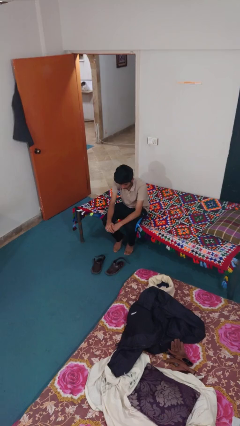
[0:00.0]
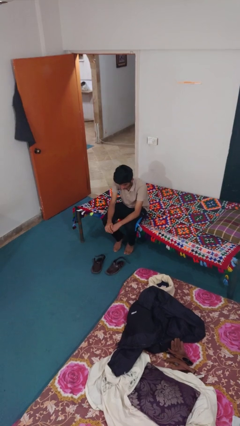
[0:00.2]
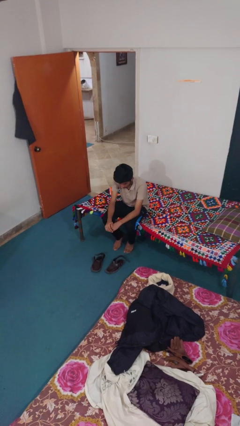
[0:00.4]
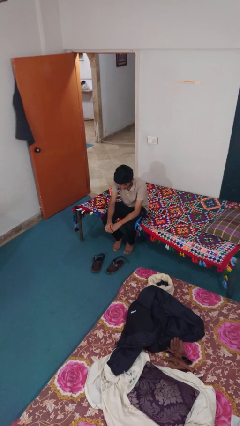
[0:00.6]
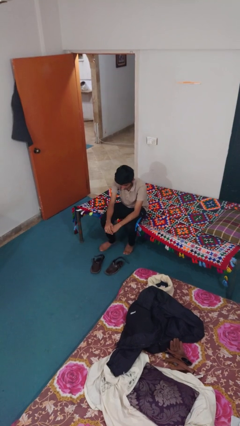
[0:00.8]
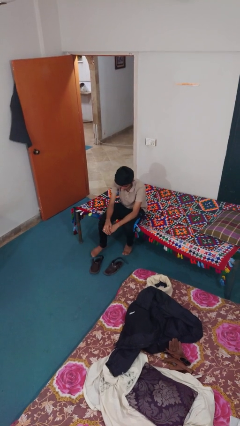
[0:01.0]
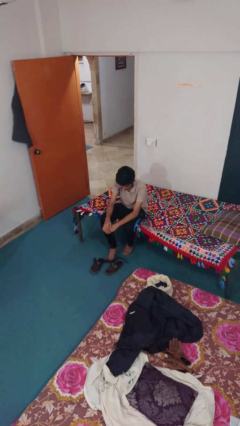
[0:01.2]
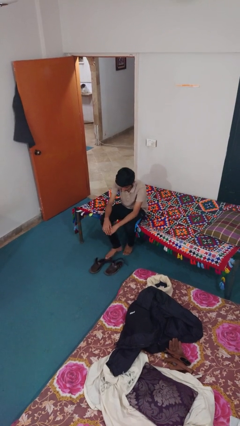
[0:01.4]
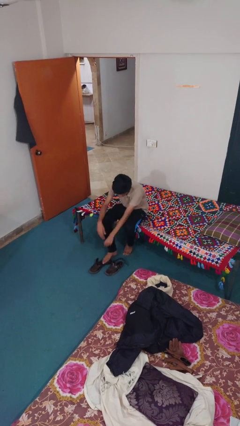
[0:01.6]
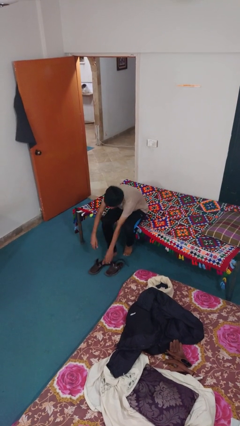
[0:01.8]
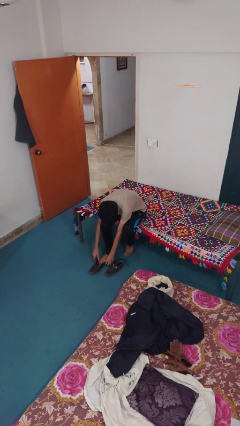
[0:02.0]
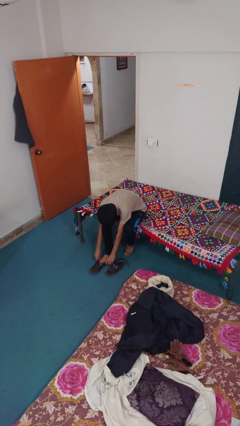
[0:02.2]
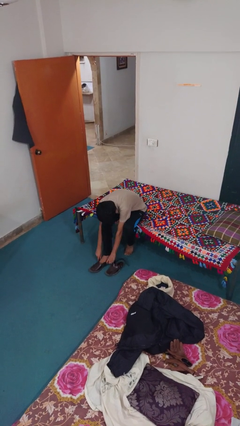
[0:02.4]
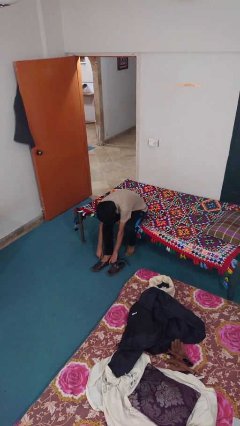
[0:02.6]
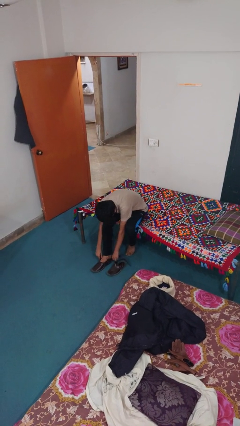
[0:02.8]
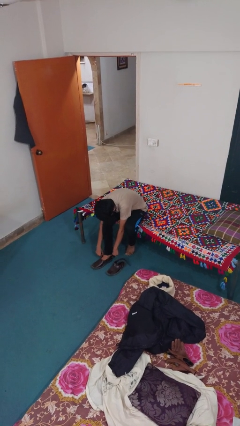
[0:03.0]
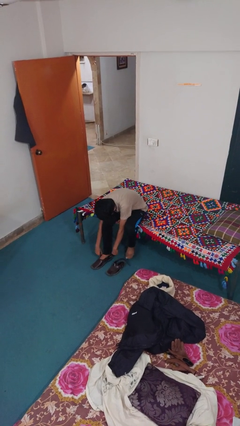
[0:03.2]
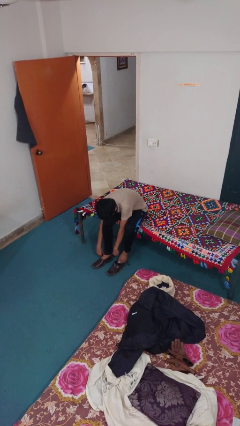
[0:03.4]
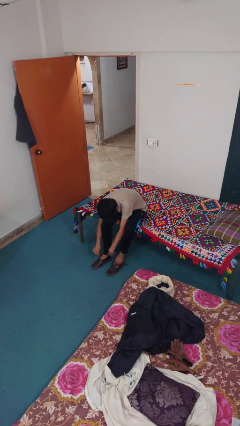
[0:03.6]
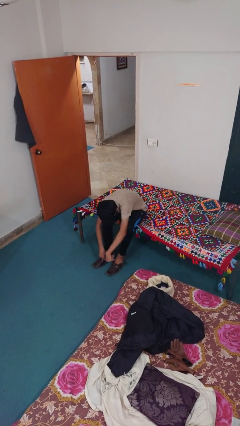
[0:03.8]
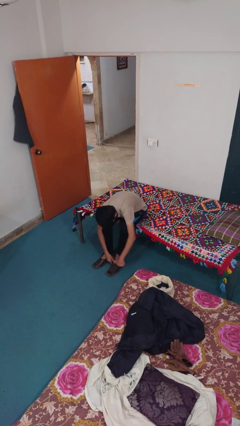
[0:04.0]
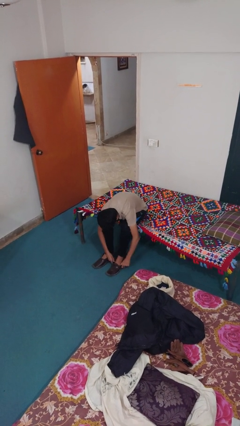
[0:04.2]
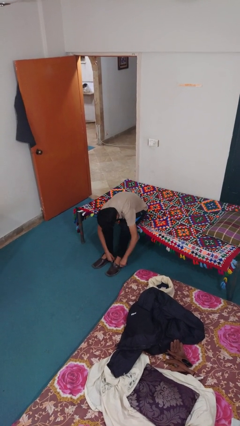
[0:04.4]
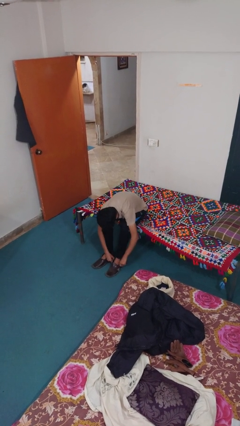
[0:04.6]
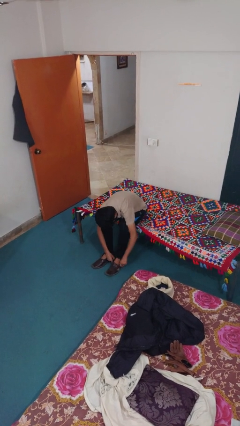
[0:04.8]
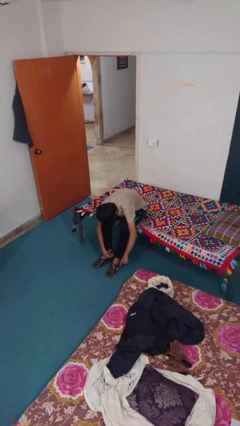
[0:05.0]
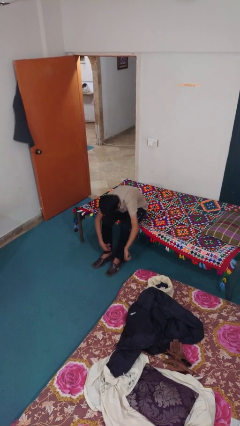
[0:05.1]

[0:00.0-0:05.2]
person puts on shoes

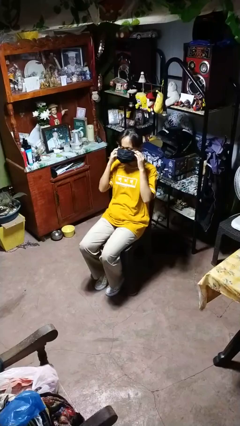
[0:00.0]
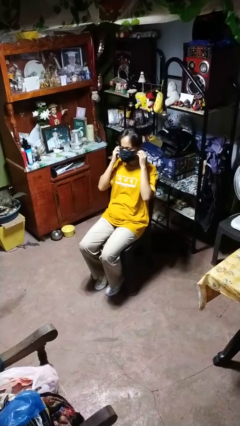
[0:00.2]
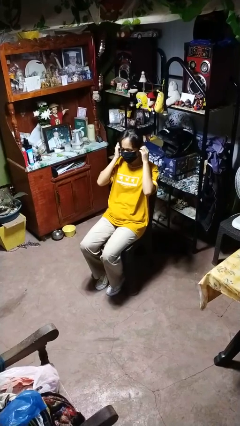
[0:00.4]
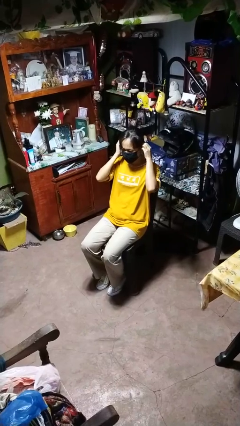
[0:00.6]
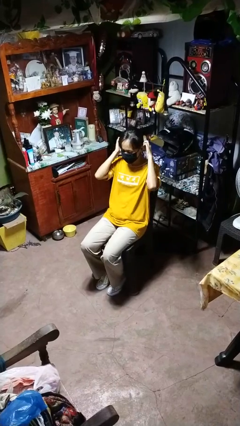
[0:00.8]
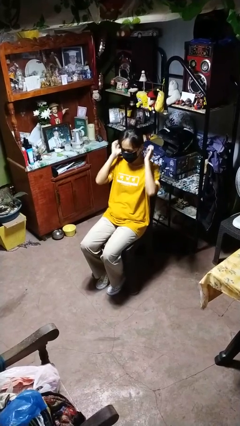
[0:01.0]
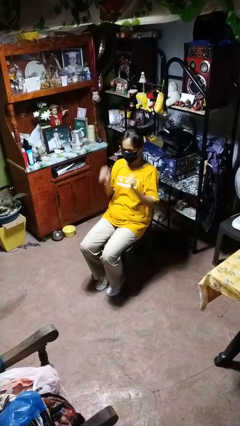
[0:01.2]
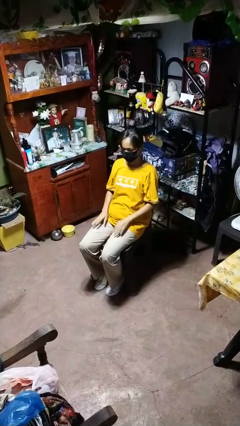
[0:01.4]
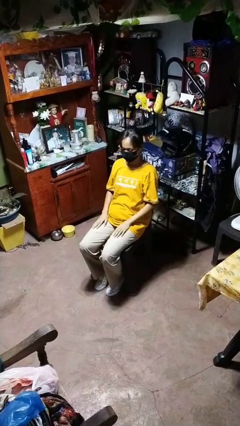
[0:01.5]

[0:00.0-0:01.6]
person puts on facemask

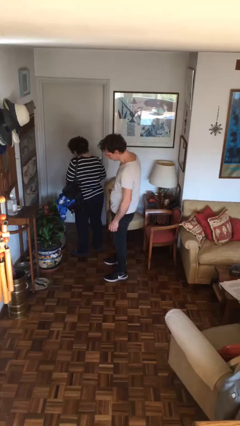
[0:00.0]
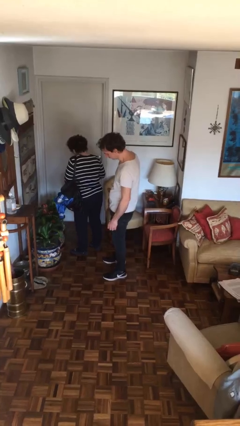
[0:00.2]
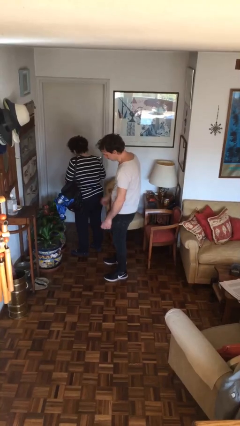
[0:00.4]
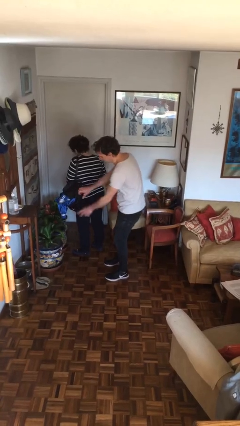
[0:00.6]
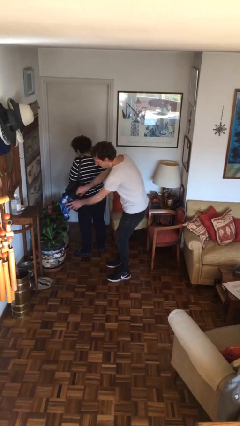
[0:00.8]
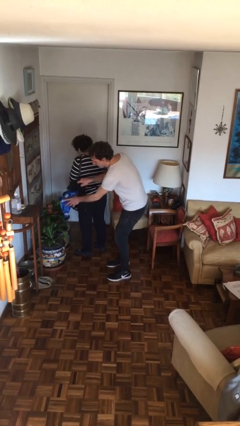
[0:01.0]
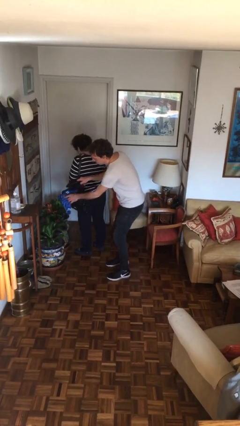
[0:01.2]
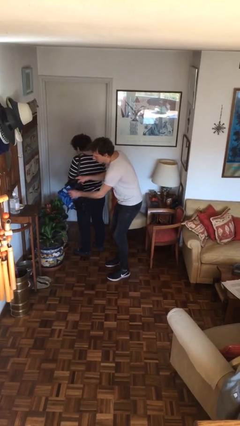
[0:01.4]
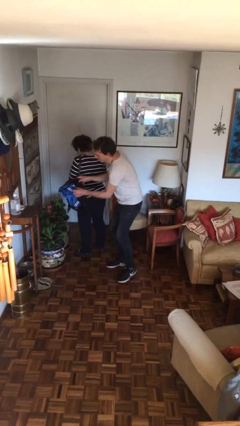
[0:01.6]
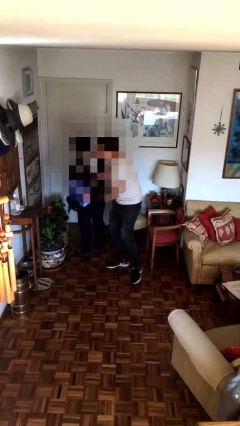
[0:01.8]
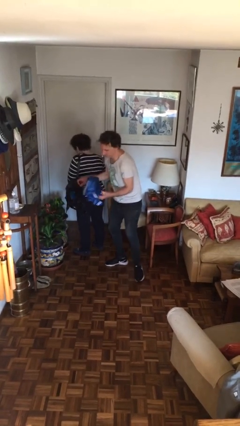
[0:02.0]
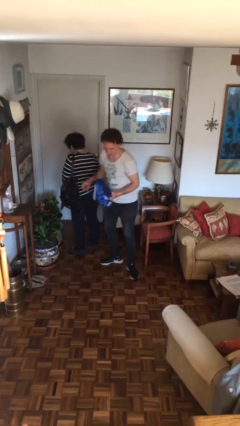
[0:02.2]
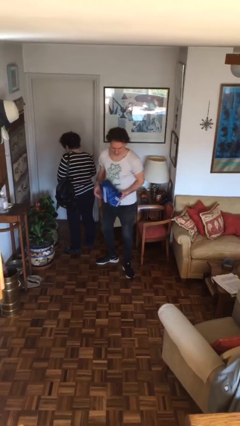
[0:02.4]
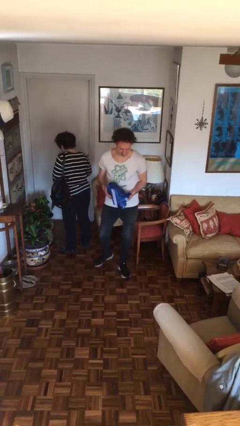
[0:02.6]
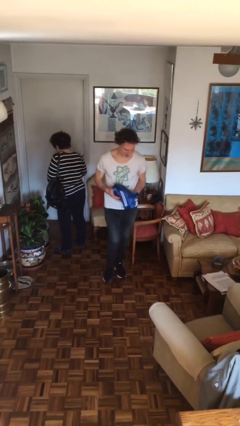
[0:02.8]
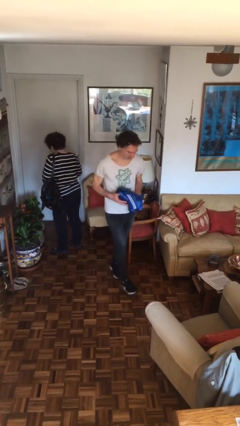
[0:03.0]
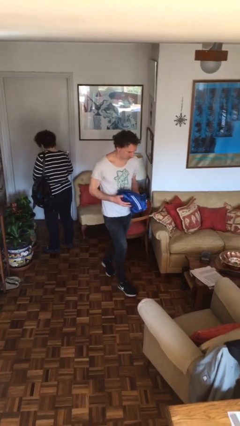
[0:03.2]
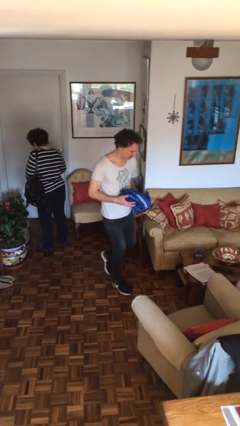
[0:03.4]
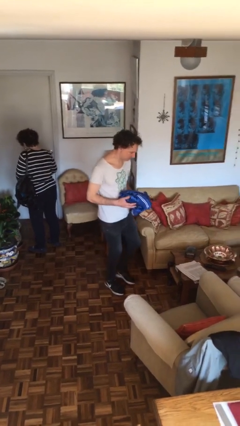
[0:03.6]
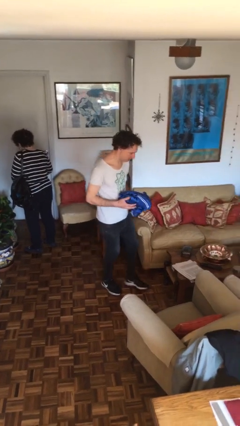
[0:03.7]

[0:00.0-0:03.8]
person steals object from person

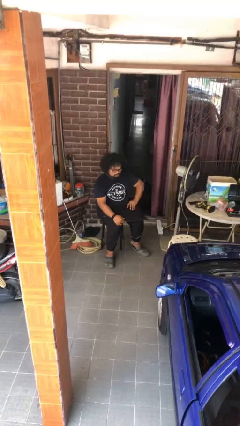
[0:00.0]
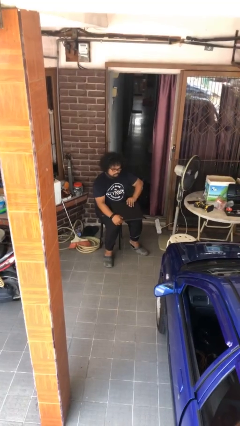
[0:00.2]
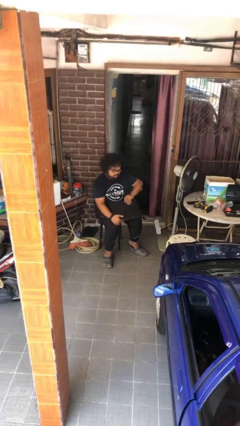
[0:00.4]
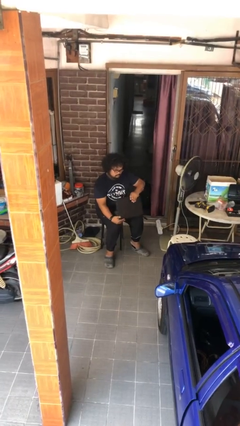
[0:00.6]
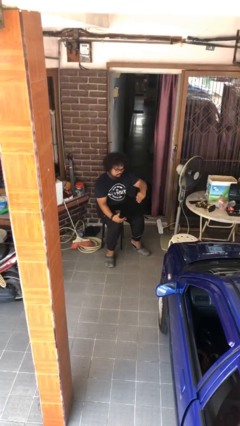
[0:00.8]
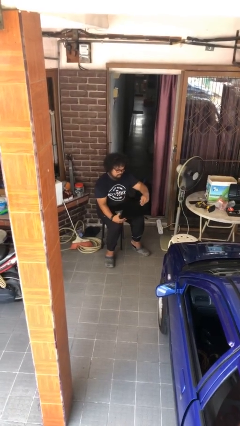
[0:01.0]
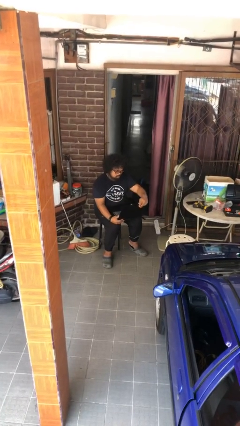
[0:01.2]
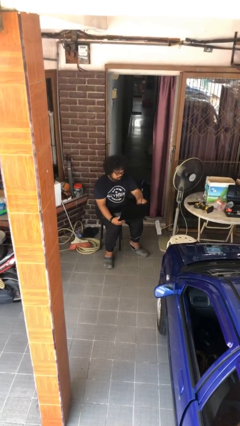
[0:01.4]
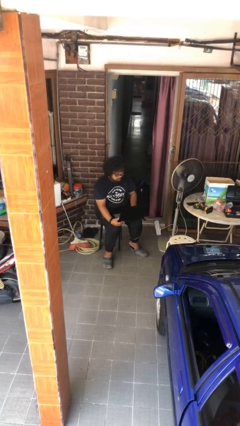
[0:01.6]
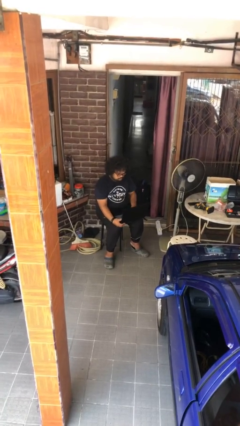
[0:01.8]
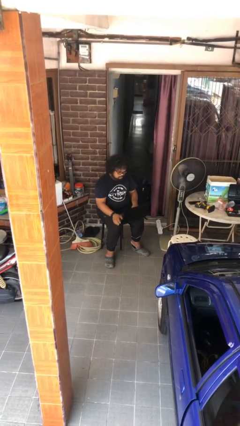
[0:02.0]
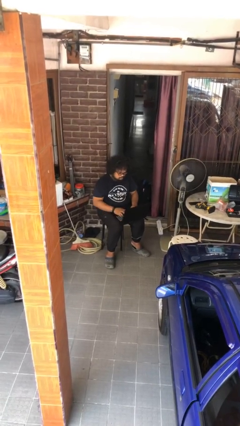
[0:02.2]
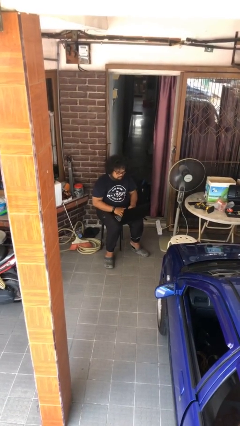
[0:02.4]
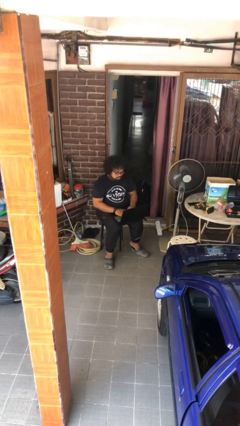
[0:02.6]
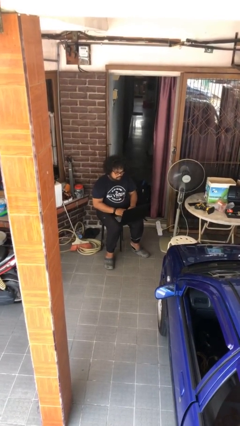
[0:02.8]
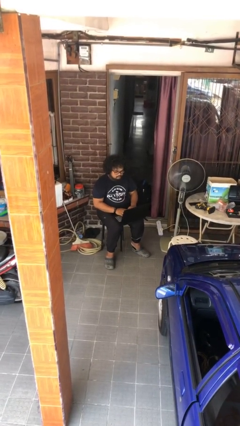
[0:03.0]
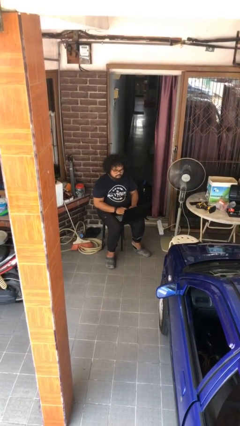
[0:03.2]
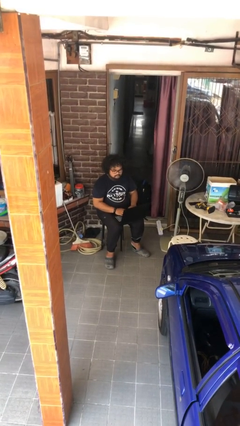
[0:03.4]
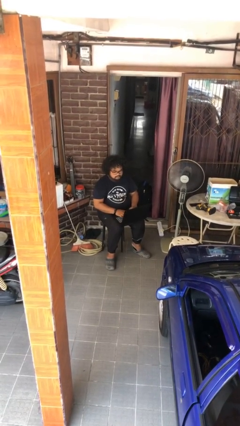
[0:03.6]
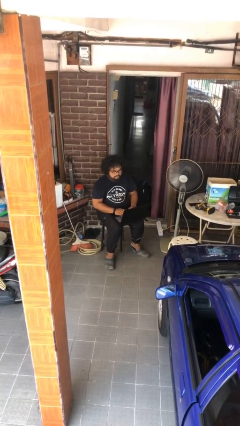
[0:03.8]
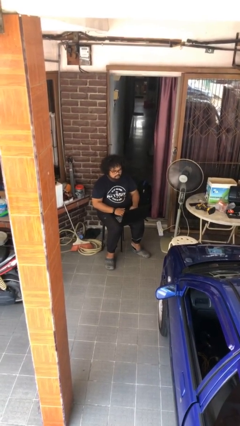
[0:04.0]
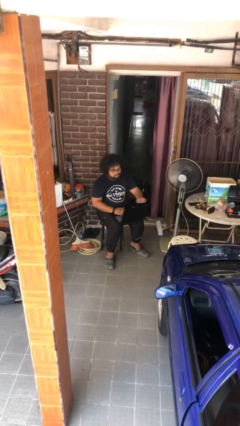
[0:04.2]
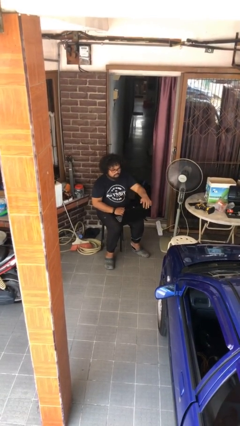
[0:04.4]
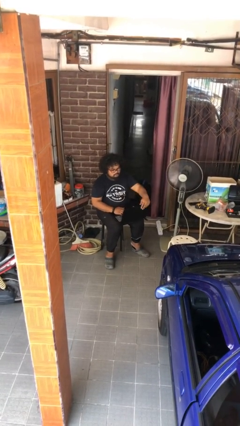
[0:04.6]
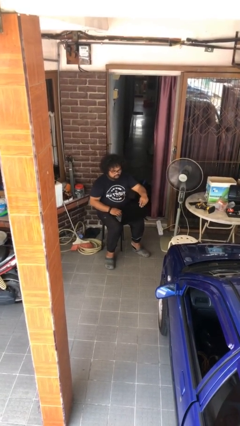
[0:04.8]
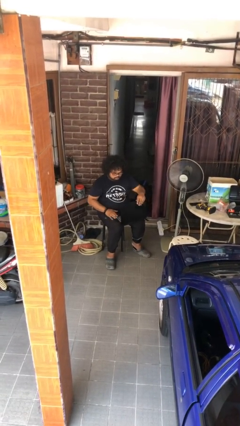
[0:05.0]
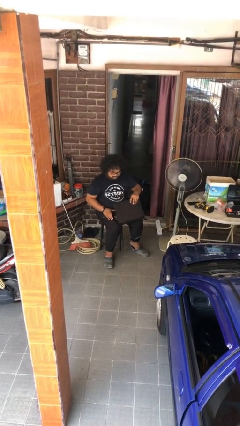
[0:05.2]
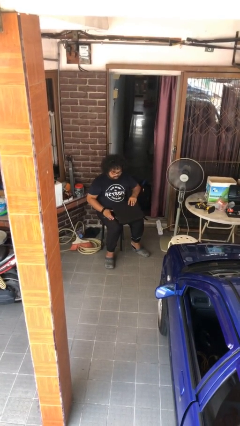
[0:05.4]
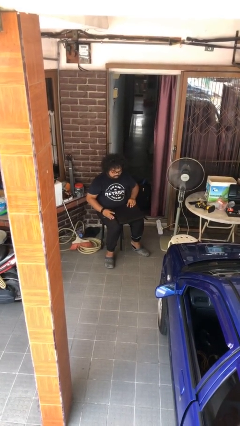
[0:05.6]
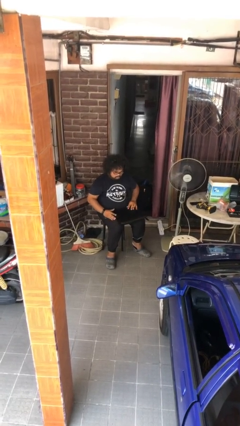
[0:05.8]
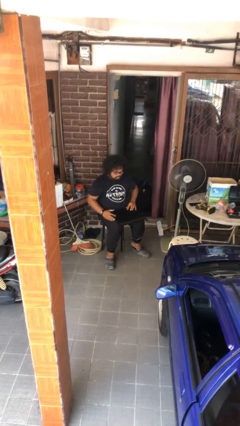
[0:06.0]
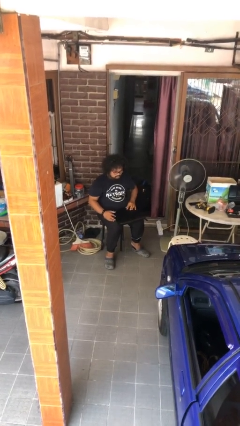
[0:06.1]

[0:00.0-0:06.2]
person interacts with laptop

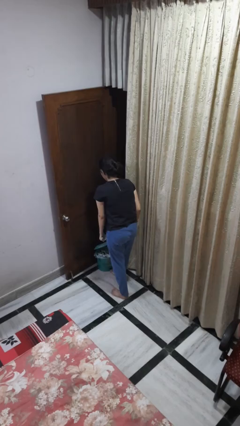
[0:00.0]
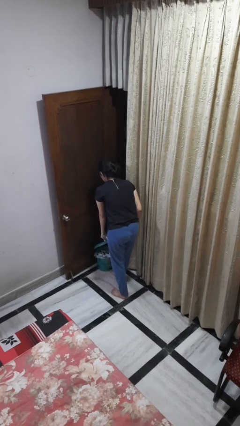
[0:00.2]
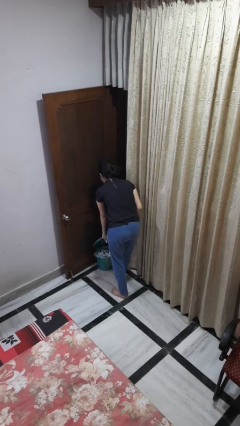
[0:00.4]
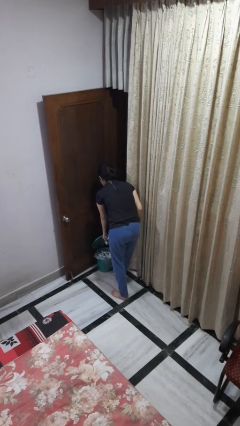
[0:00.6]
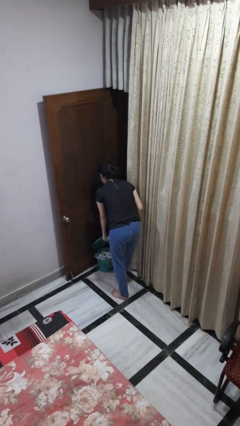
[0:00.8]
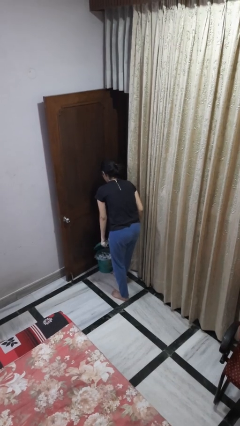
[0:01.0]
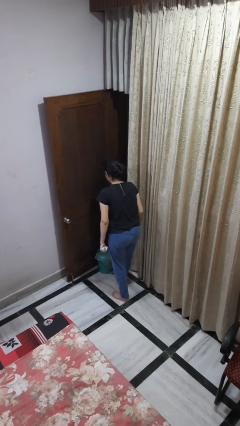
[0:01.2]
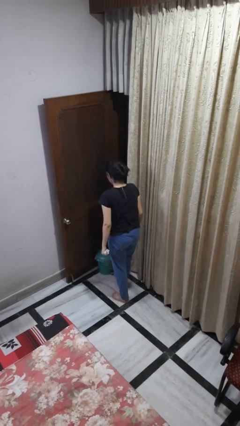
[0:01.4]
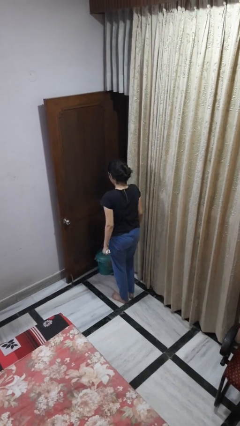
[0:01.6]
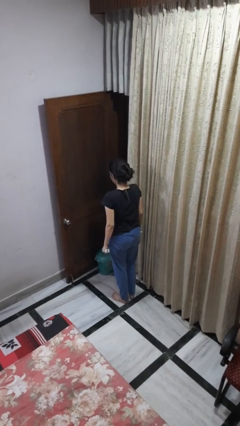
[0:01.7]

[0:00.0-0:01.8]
person discards trash
